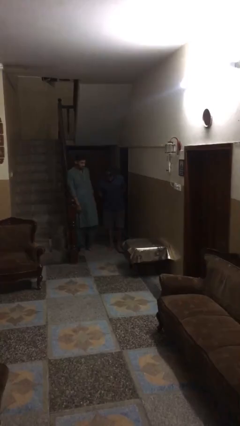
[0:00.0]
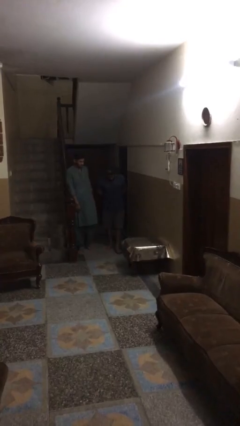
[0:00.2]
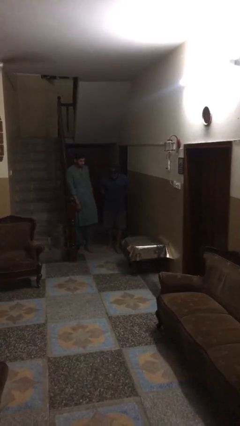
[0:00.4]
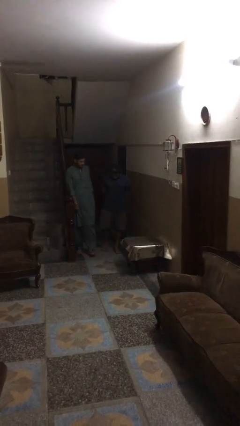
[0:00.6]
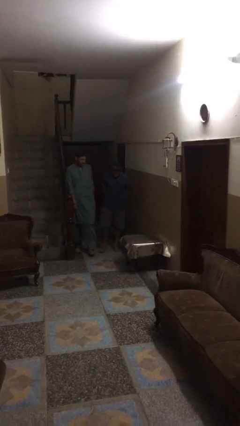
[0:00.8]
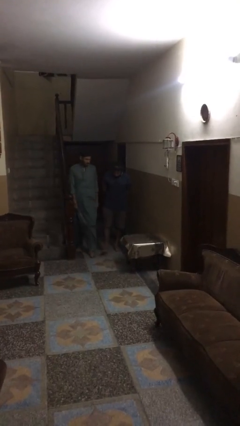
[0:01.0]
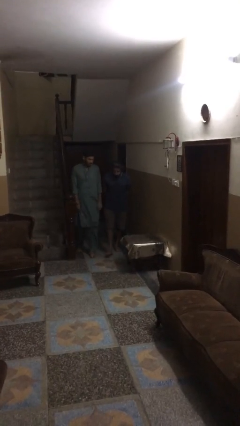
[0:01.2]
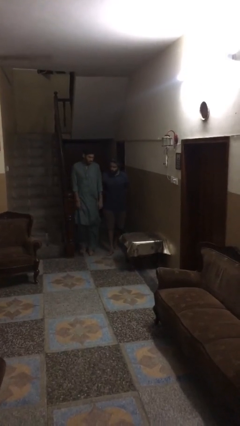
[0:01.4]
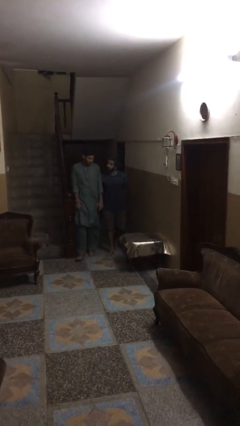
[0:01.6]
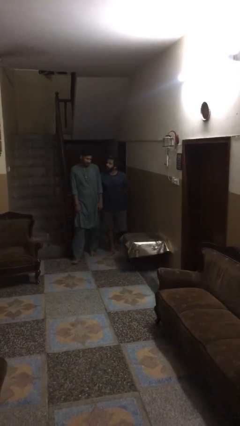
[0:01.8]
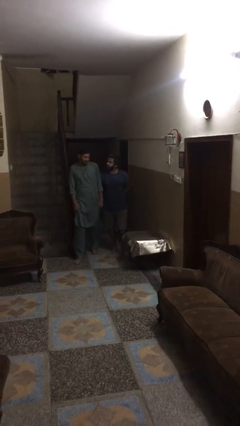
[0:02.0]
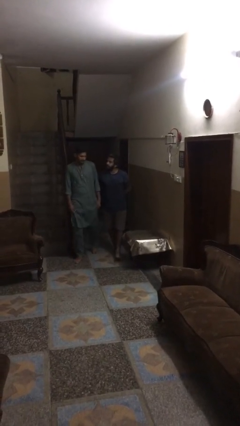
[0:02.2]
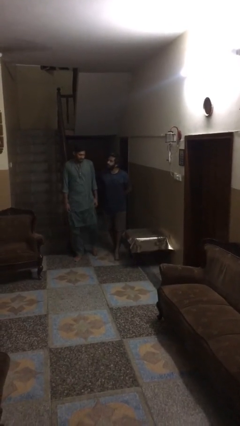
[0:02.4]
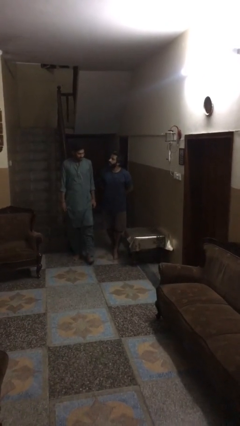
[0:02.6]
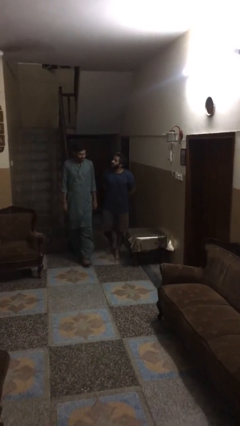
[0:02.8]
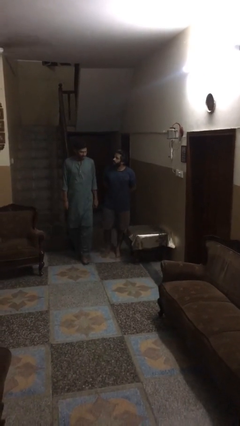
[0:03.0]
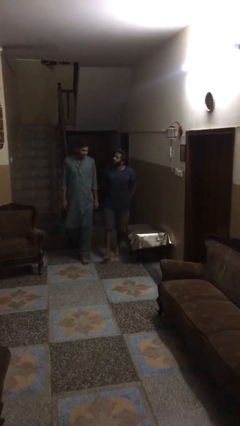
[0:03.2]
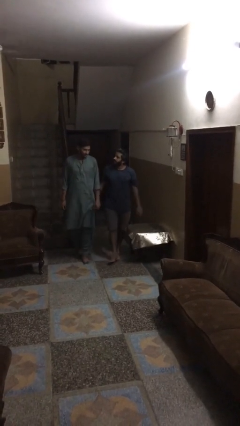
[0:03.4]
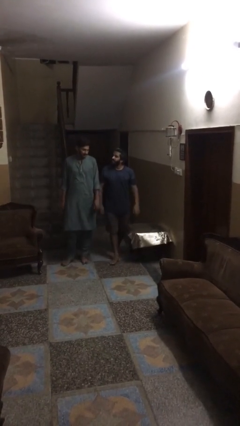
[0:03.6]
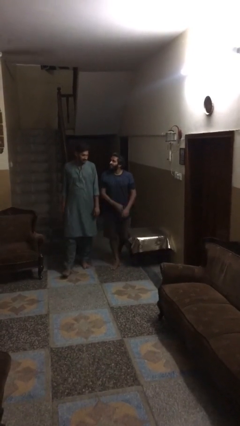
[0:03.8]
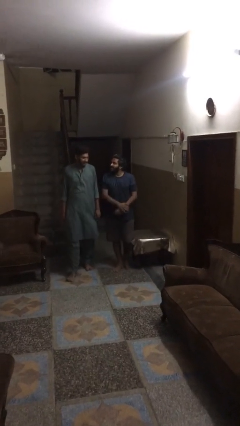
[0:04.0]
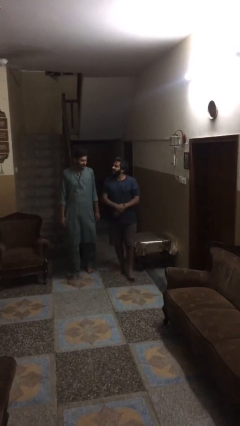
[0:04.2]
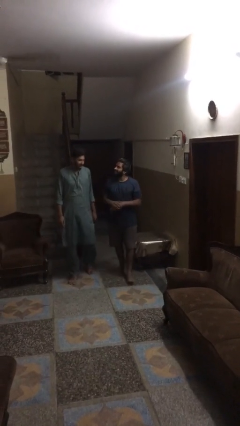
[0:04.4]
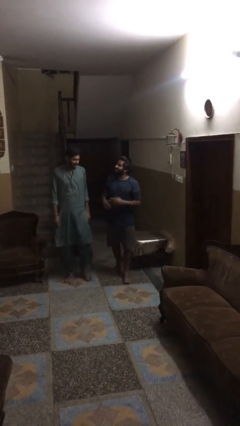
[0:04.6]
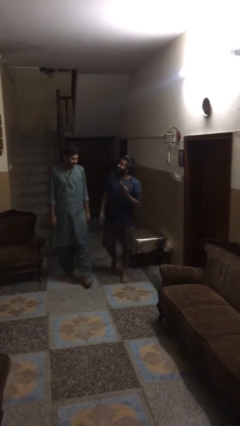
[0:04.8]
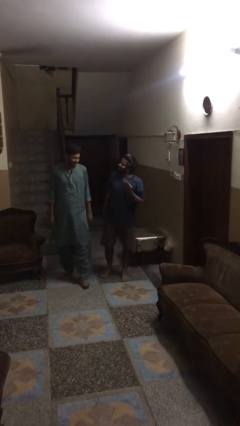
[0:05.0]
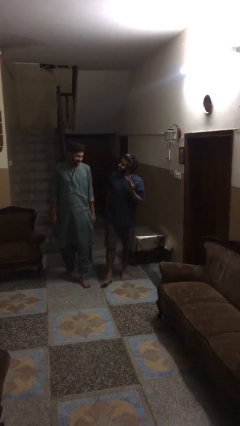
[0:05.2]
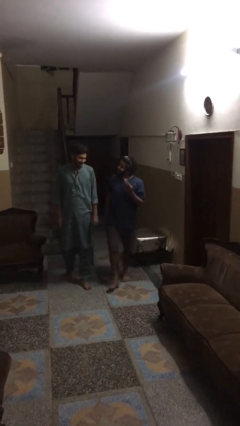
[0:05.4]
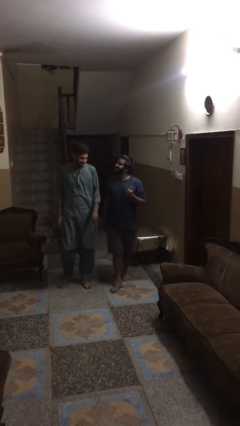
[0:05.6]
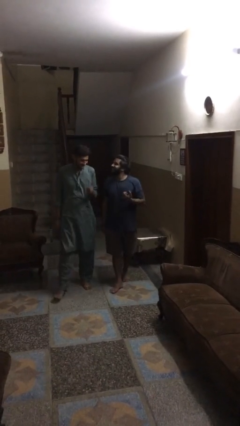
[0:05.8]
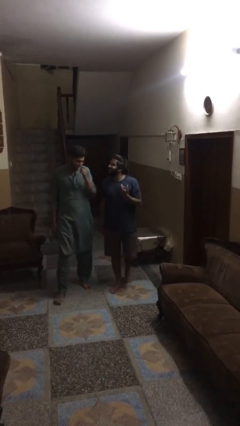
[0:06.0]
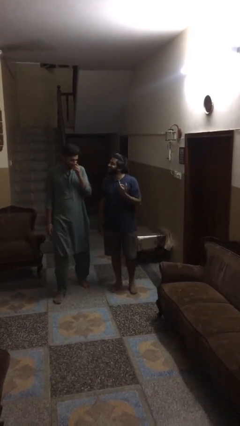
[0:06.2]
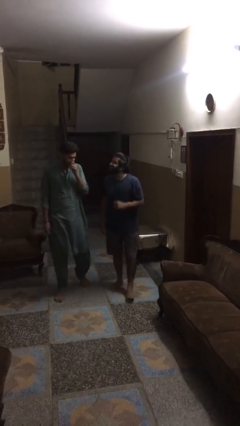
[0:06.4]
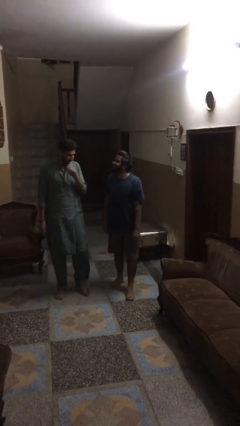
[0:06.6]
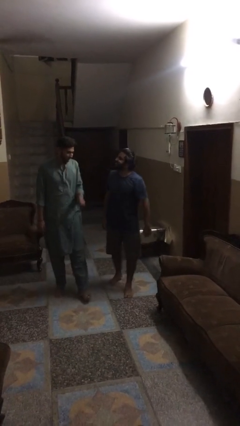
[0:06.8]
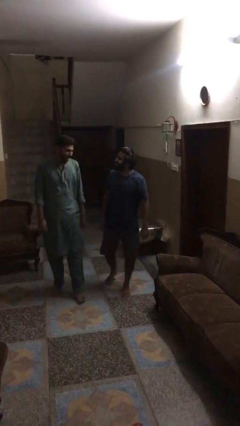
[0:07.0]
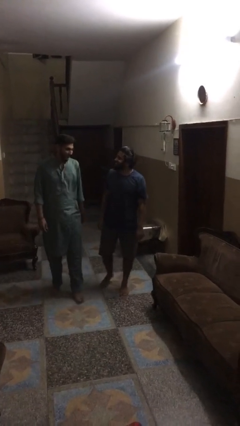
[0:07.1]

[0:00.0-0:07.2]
person talks to person

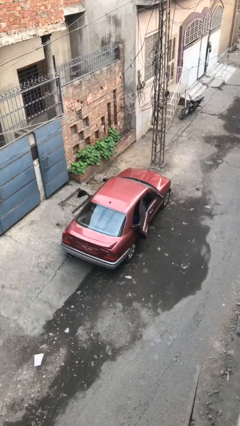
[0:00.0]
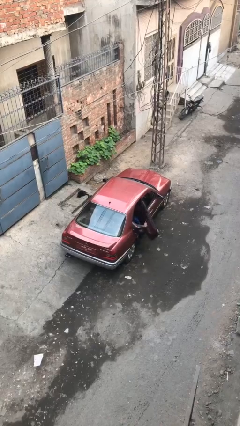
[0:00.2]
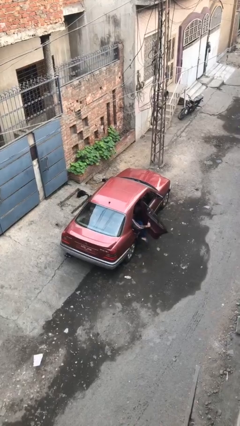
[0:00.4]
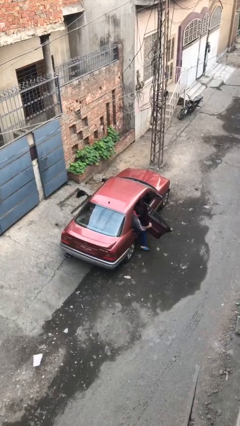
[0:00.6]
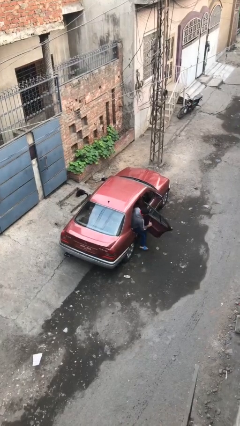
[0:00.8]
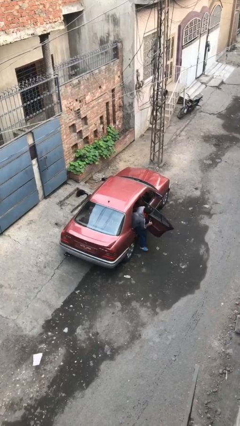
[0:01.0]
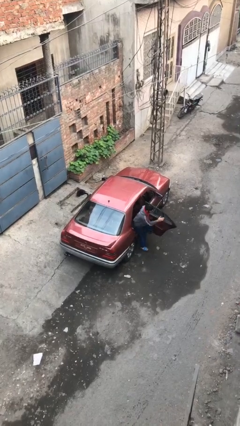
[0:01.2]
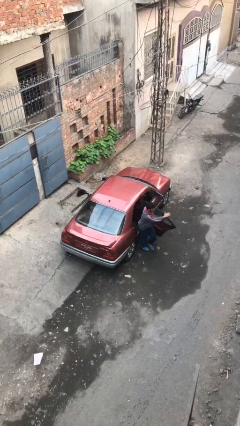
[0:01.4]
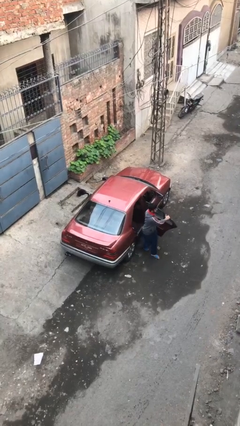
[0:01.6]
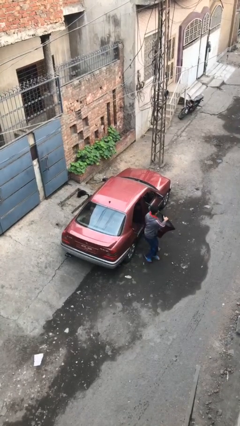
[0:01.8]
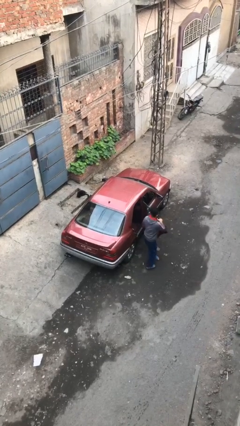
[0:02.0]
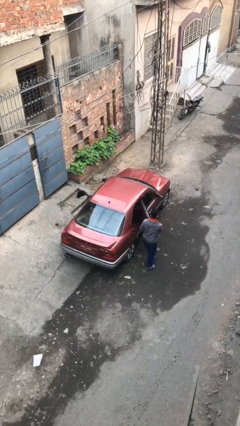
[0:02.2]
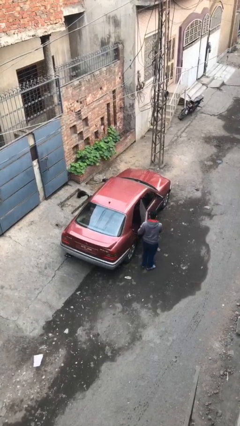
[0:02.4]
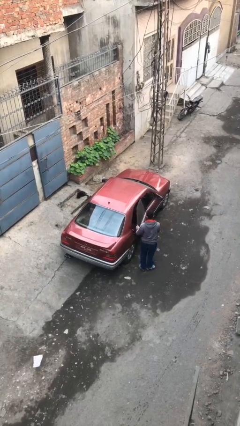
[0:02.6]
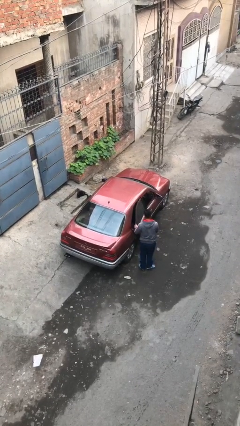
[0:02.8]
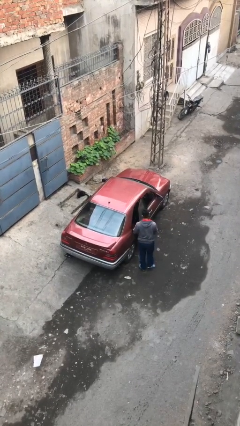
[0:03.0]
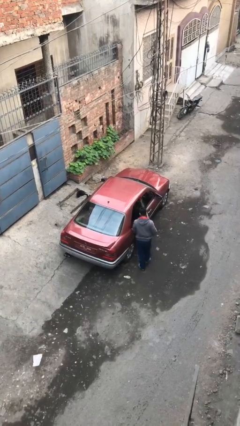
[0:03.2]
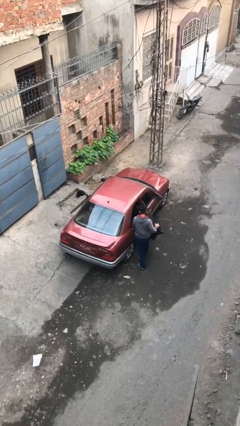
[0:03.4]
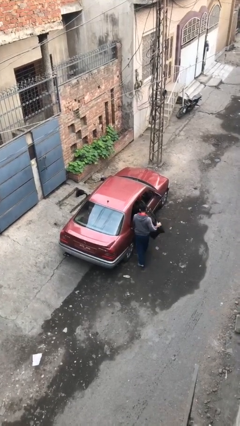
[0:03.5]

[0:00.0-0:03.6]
car drops off person

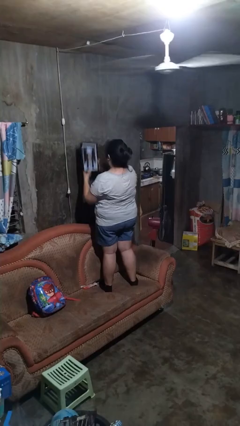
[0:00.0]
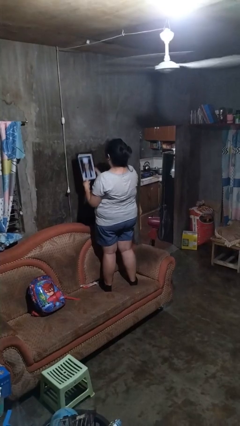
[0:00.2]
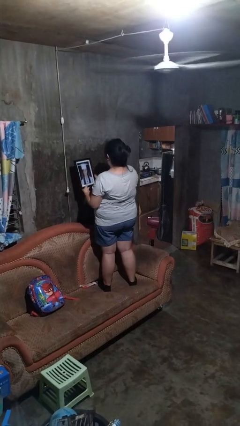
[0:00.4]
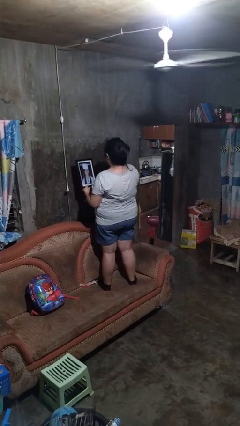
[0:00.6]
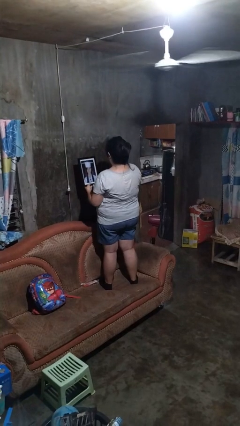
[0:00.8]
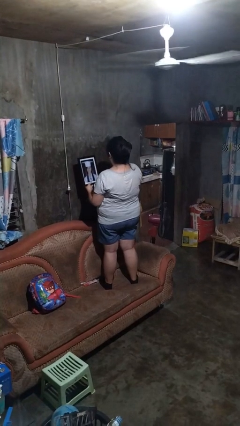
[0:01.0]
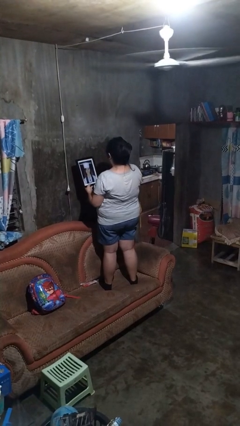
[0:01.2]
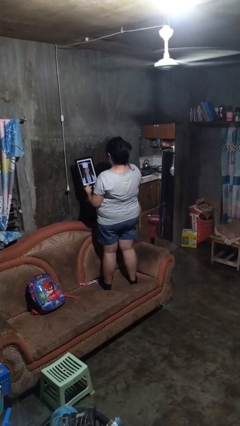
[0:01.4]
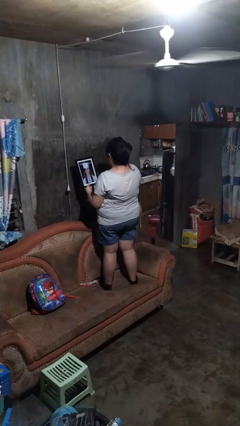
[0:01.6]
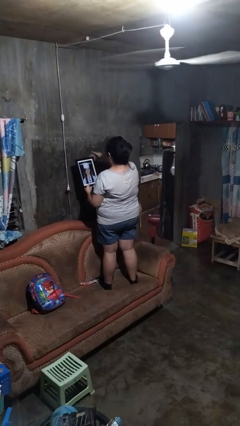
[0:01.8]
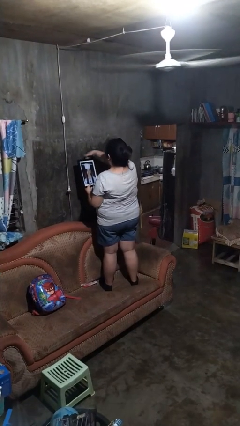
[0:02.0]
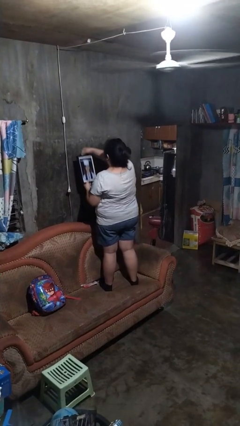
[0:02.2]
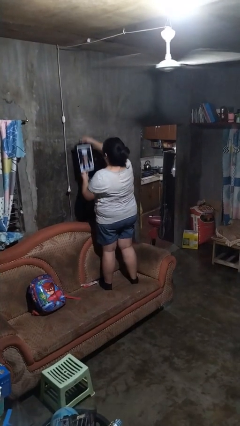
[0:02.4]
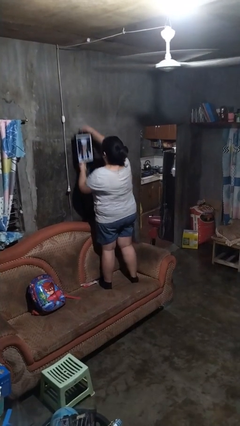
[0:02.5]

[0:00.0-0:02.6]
person puts up picture frame

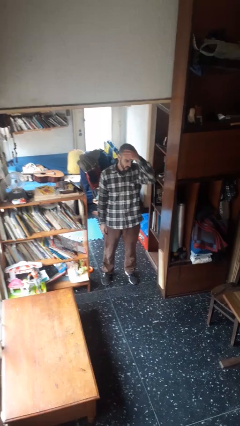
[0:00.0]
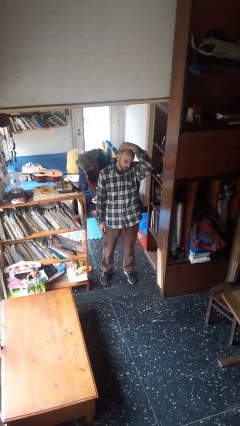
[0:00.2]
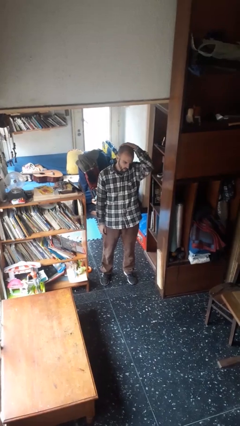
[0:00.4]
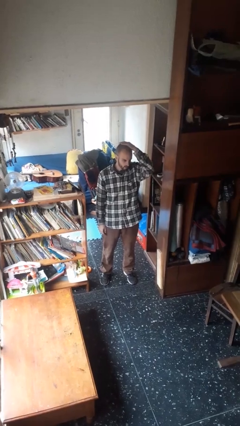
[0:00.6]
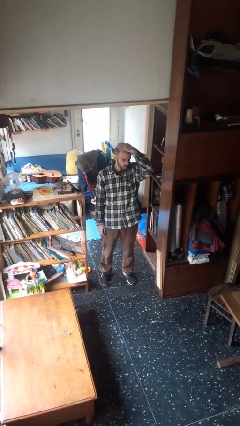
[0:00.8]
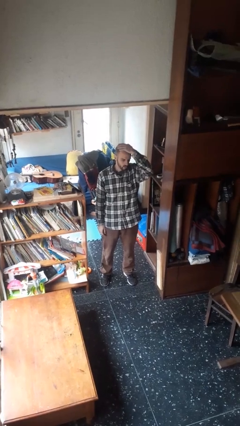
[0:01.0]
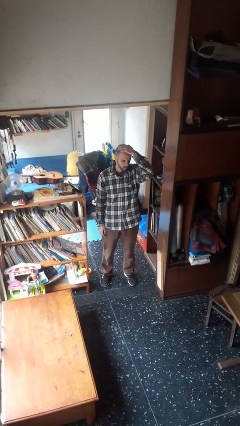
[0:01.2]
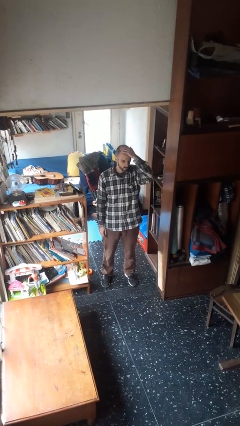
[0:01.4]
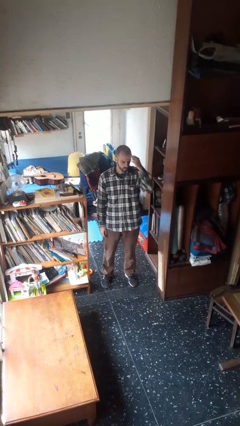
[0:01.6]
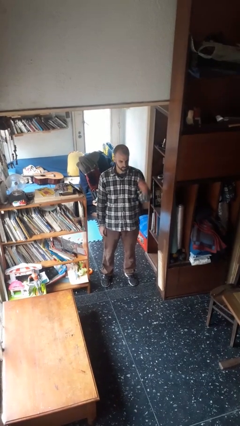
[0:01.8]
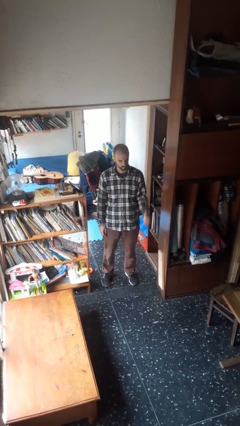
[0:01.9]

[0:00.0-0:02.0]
person pats head

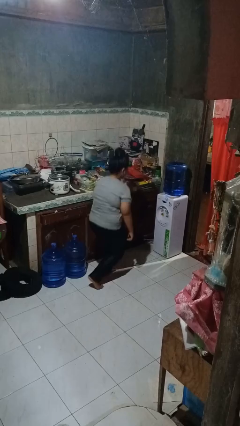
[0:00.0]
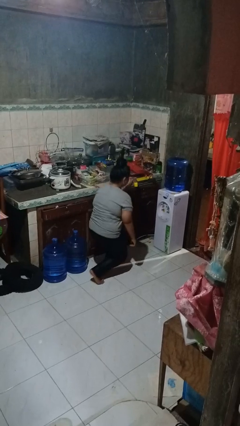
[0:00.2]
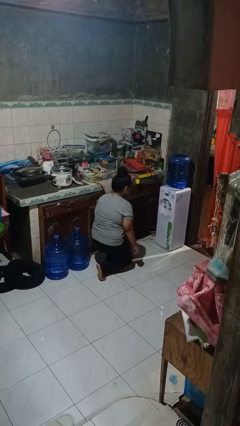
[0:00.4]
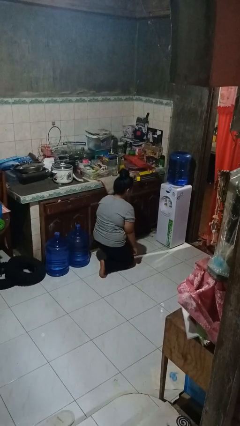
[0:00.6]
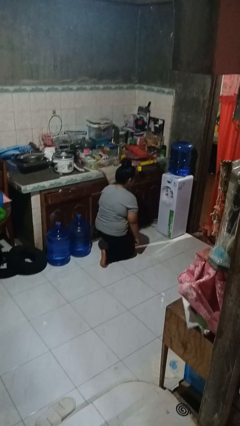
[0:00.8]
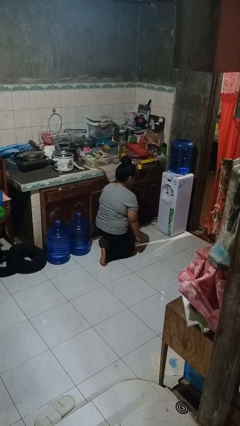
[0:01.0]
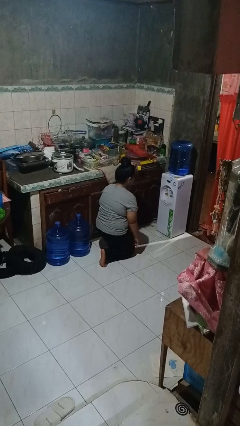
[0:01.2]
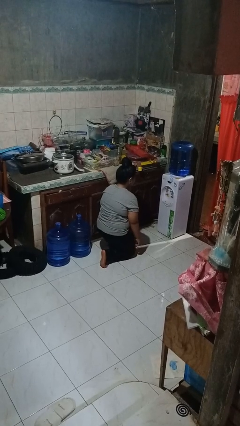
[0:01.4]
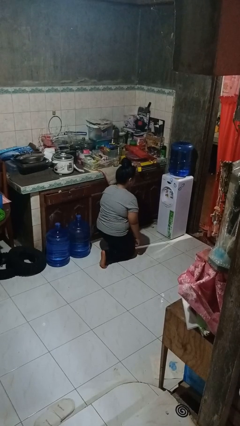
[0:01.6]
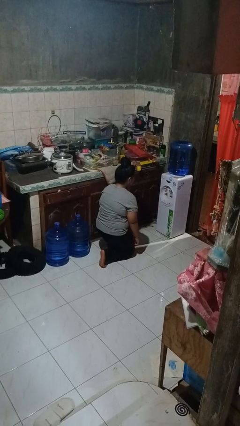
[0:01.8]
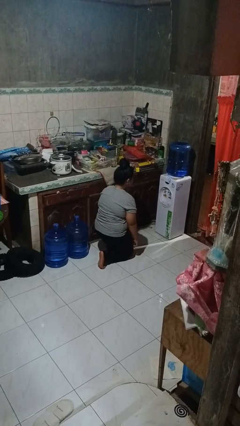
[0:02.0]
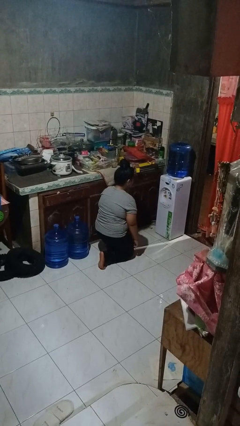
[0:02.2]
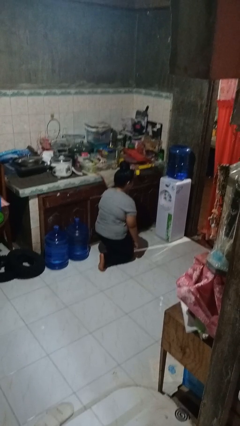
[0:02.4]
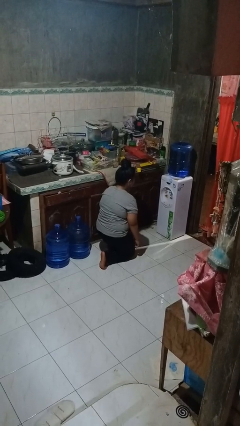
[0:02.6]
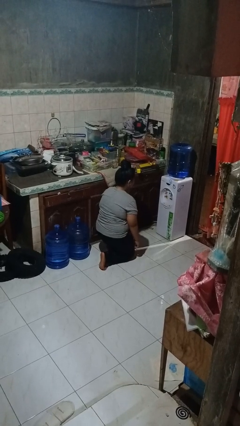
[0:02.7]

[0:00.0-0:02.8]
person kneels
